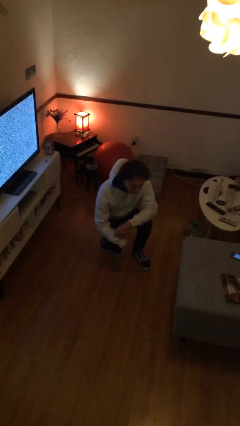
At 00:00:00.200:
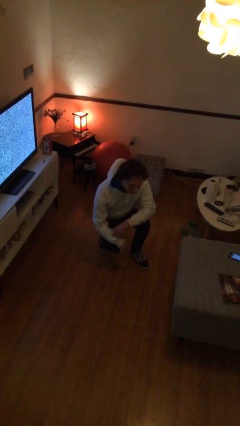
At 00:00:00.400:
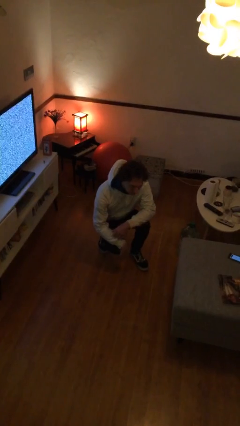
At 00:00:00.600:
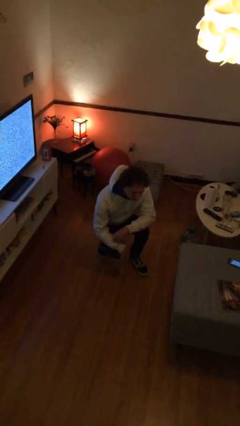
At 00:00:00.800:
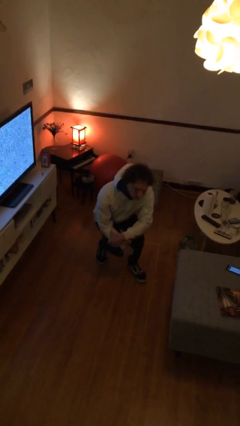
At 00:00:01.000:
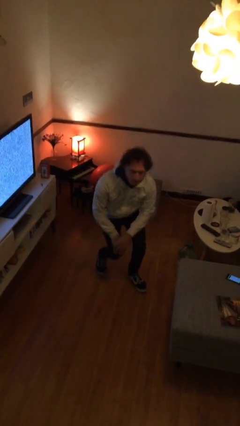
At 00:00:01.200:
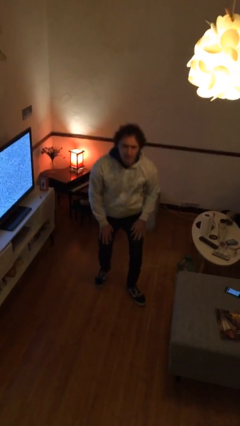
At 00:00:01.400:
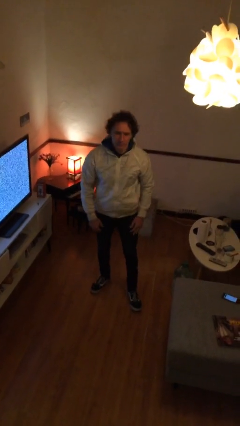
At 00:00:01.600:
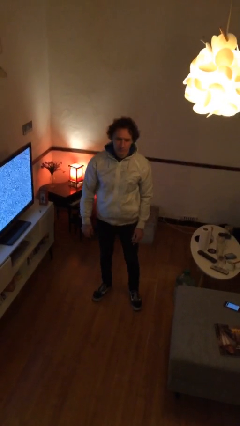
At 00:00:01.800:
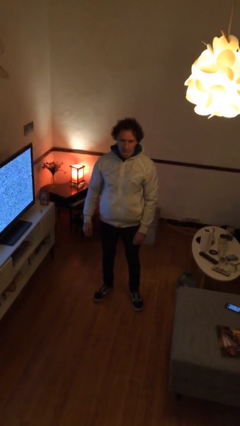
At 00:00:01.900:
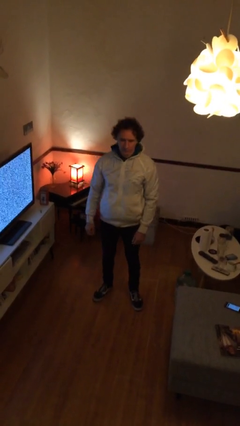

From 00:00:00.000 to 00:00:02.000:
person stands up

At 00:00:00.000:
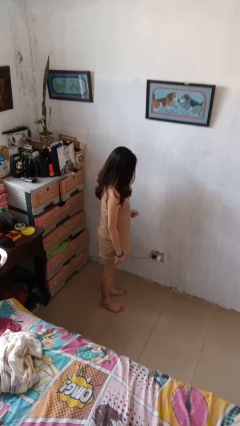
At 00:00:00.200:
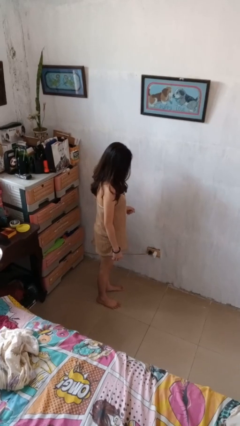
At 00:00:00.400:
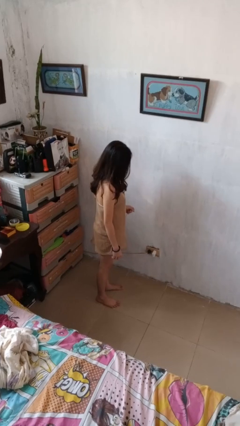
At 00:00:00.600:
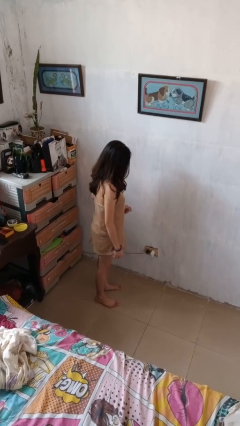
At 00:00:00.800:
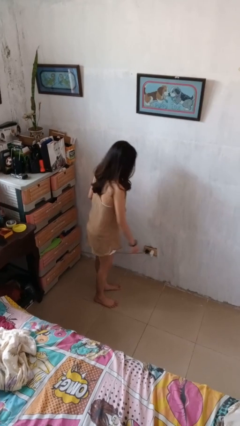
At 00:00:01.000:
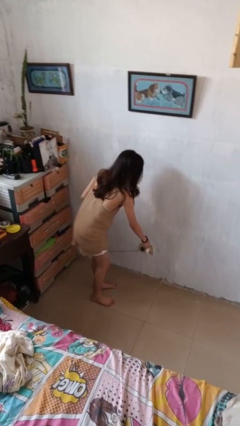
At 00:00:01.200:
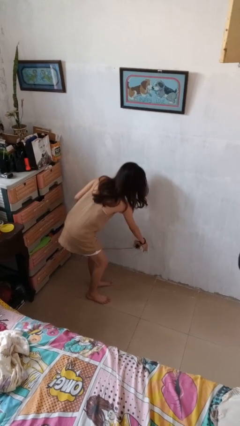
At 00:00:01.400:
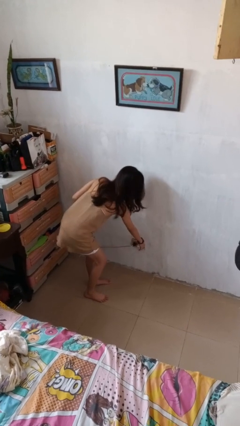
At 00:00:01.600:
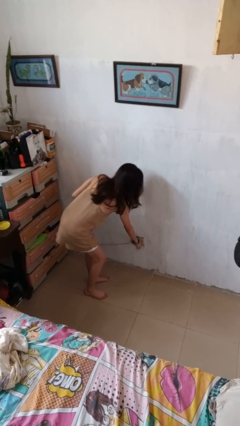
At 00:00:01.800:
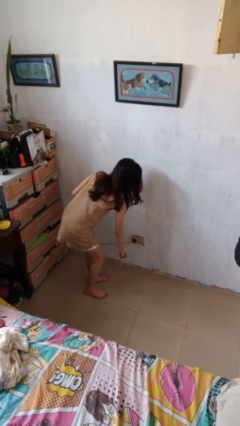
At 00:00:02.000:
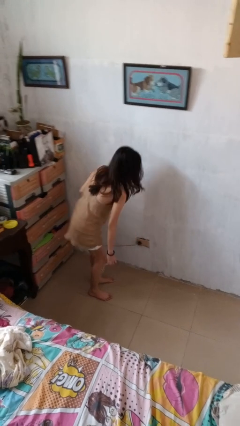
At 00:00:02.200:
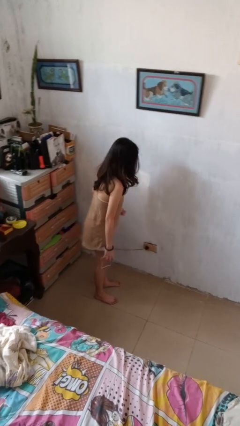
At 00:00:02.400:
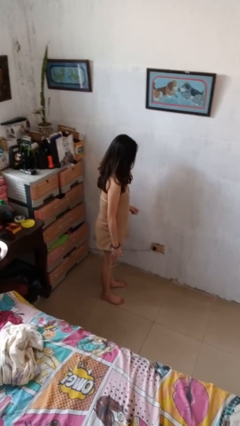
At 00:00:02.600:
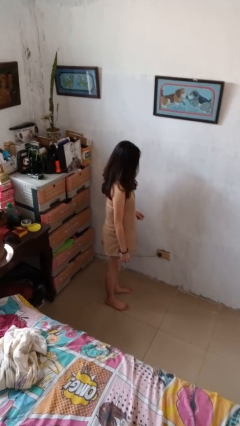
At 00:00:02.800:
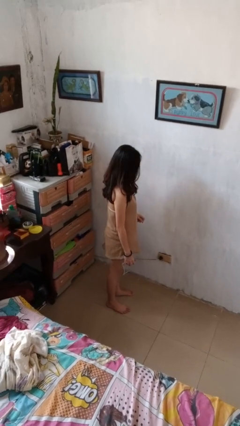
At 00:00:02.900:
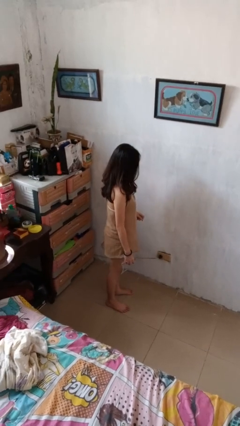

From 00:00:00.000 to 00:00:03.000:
person unplugs from electrical socket

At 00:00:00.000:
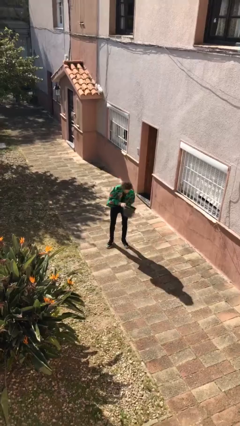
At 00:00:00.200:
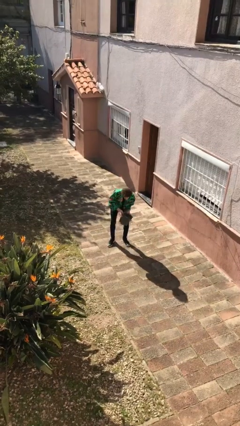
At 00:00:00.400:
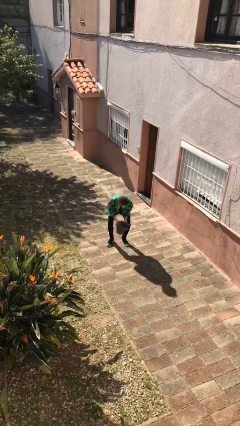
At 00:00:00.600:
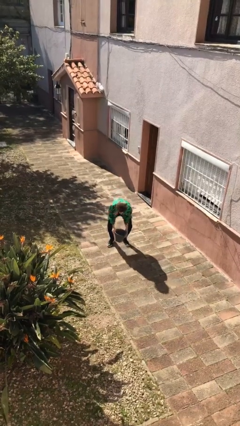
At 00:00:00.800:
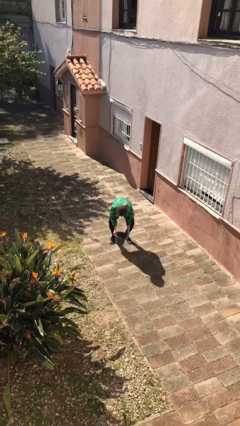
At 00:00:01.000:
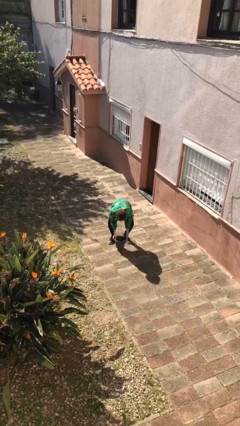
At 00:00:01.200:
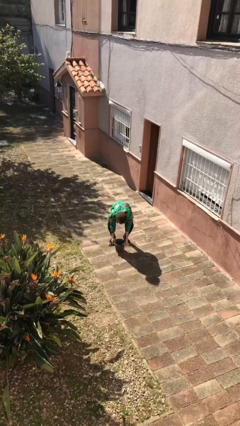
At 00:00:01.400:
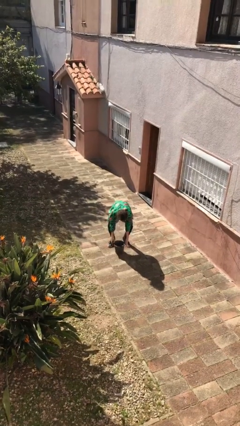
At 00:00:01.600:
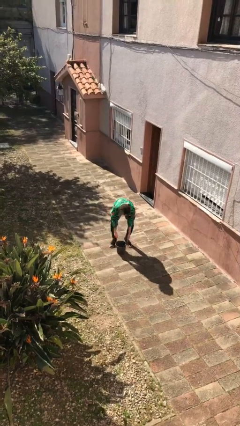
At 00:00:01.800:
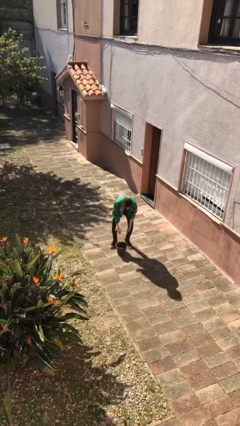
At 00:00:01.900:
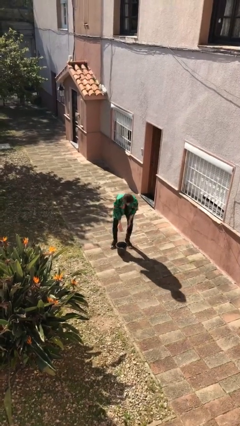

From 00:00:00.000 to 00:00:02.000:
person puts down object on floor

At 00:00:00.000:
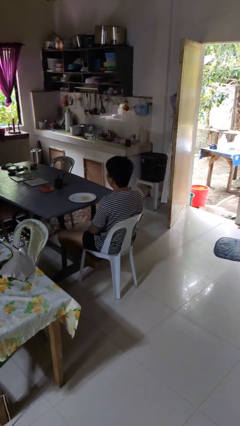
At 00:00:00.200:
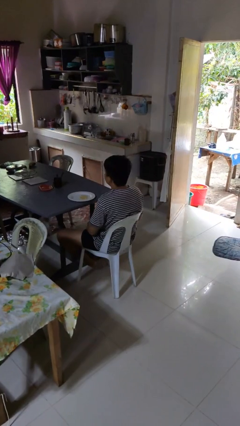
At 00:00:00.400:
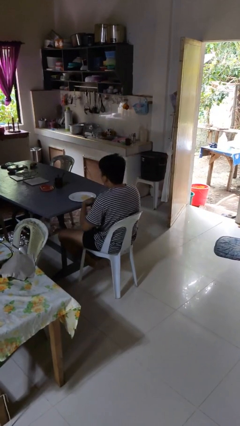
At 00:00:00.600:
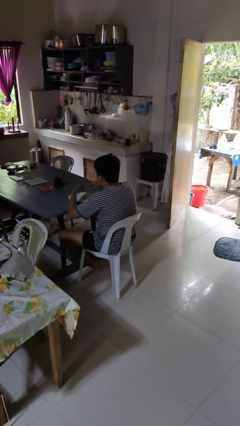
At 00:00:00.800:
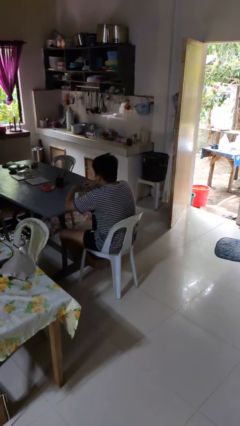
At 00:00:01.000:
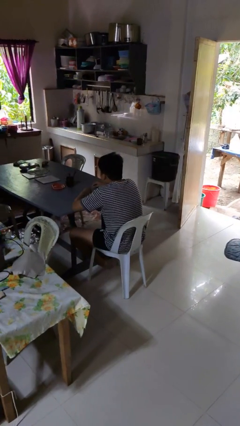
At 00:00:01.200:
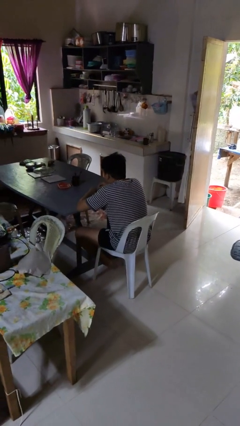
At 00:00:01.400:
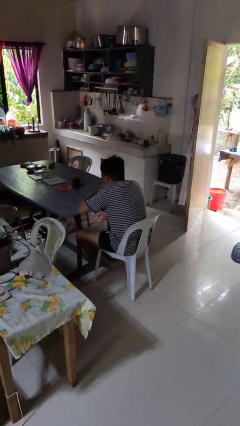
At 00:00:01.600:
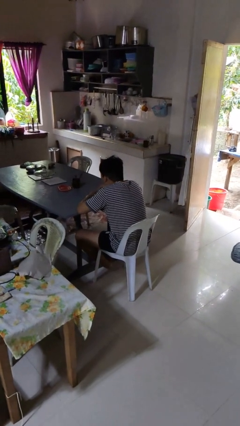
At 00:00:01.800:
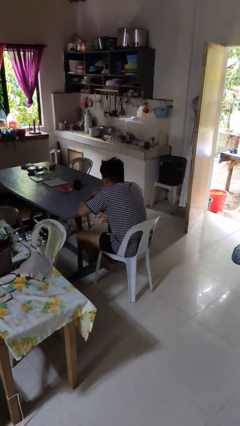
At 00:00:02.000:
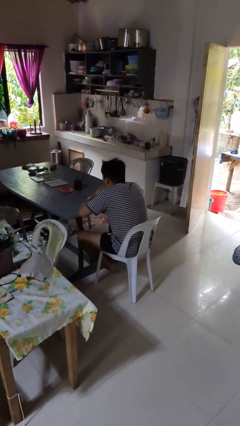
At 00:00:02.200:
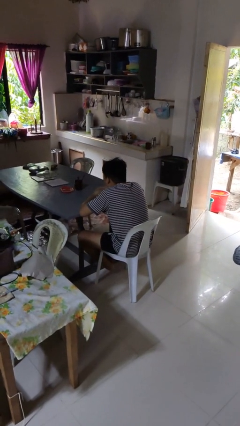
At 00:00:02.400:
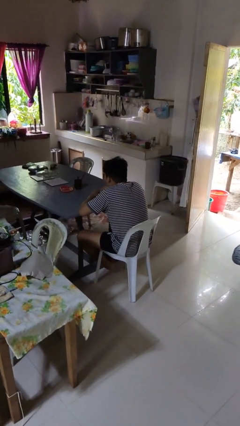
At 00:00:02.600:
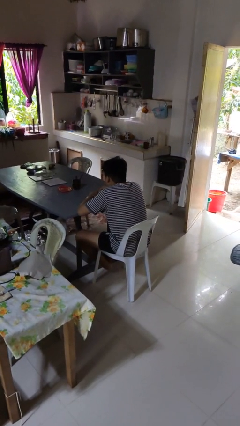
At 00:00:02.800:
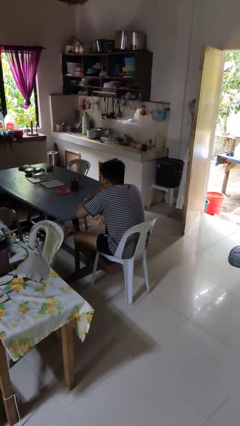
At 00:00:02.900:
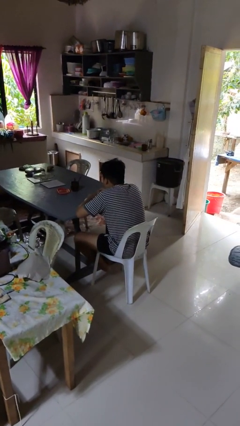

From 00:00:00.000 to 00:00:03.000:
person eats with hands

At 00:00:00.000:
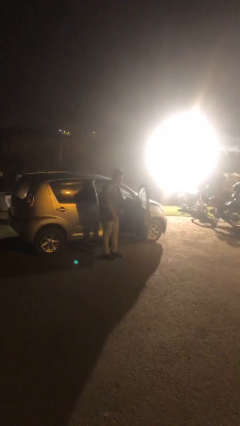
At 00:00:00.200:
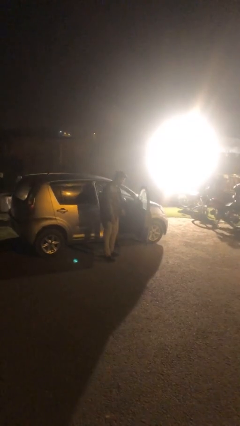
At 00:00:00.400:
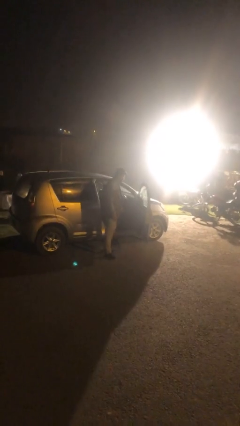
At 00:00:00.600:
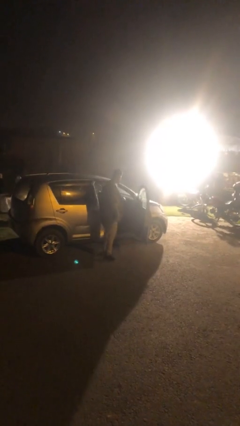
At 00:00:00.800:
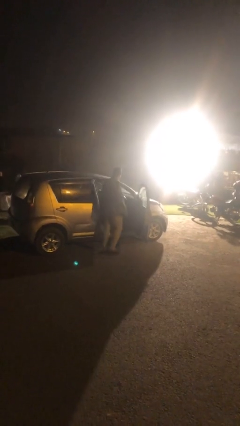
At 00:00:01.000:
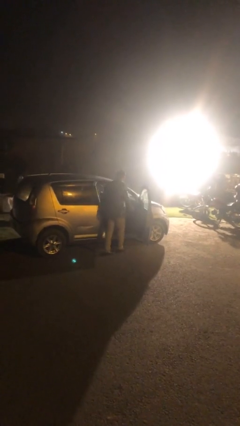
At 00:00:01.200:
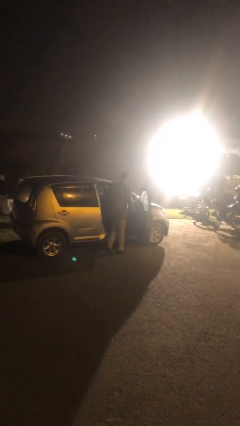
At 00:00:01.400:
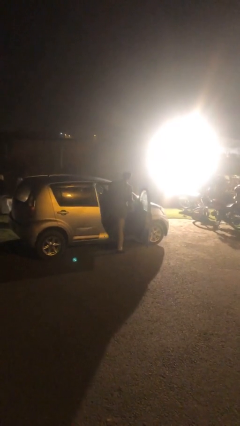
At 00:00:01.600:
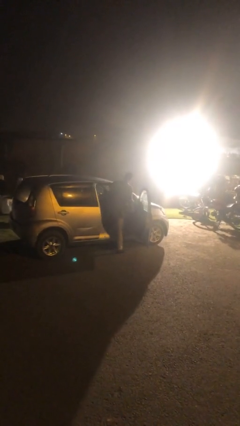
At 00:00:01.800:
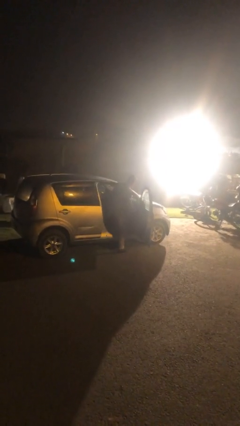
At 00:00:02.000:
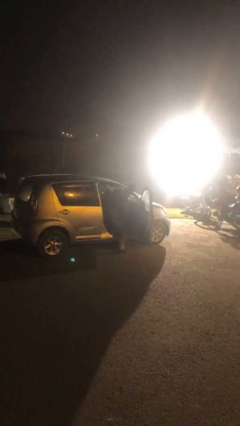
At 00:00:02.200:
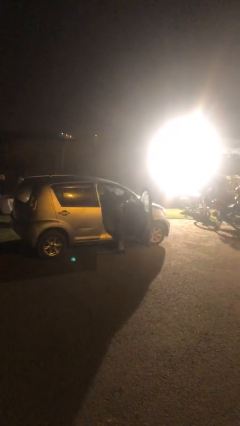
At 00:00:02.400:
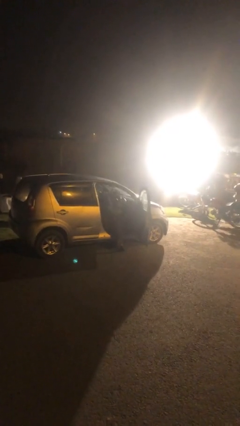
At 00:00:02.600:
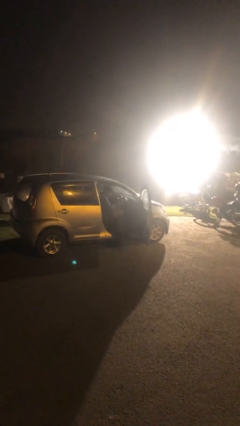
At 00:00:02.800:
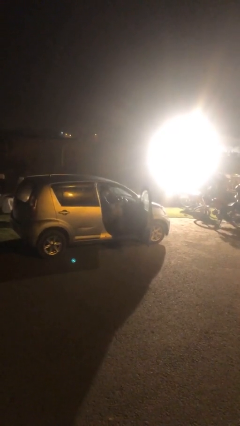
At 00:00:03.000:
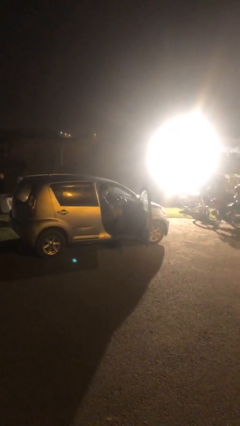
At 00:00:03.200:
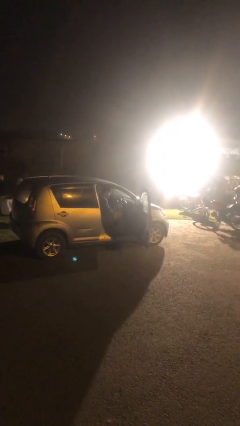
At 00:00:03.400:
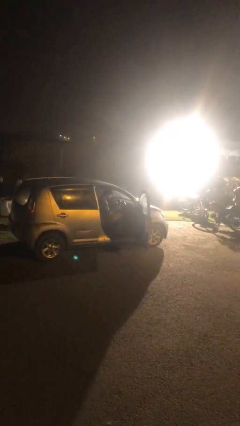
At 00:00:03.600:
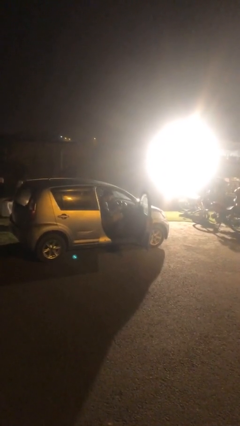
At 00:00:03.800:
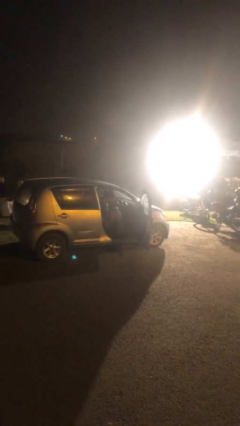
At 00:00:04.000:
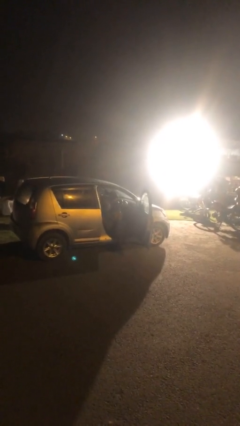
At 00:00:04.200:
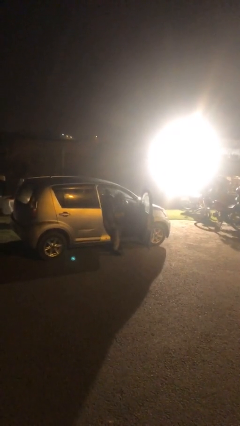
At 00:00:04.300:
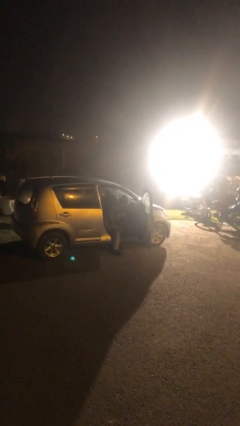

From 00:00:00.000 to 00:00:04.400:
person enters car

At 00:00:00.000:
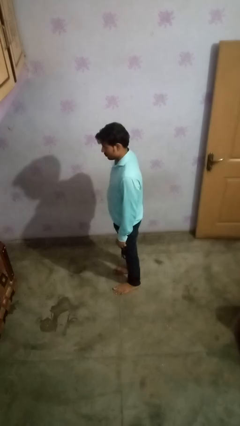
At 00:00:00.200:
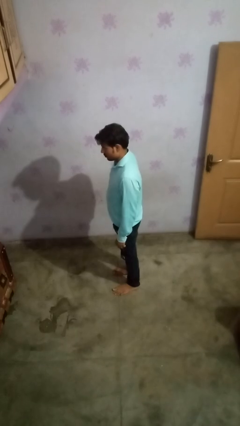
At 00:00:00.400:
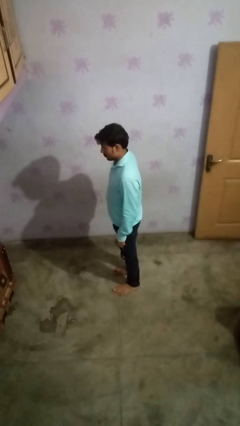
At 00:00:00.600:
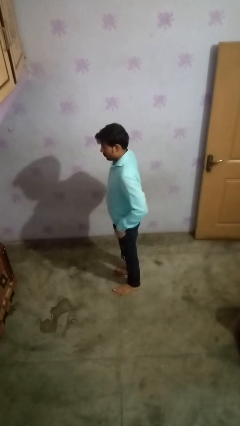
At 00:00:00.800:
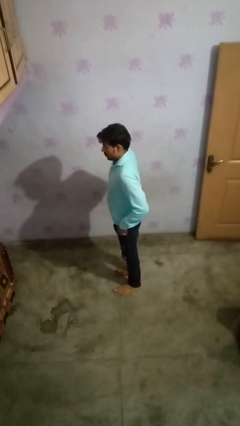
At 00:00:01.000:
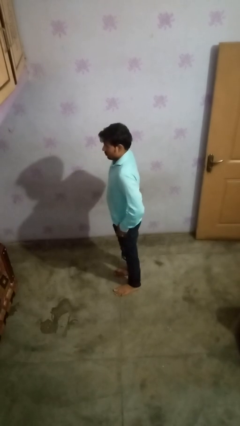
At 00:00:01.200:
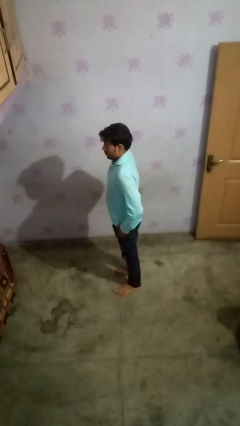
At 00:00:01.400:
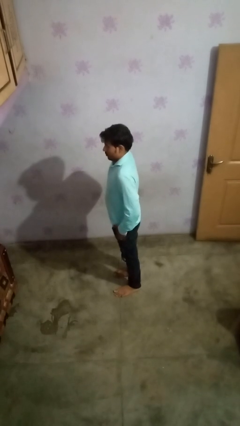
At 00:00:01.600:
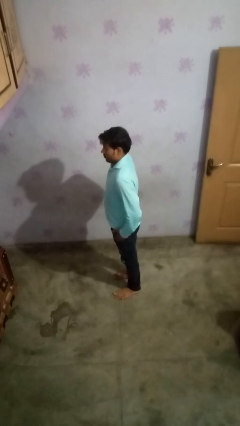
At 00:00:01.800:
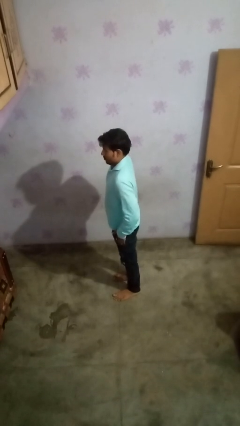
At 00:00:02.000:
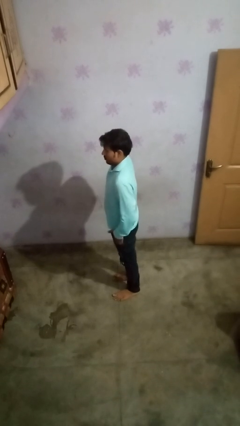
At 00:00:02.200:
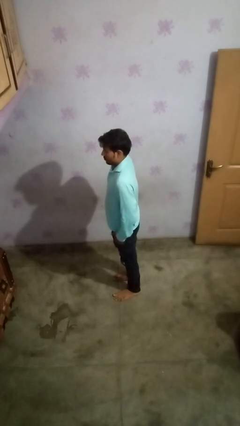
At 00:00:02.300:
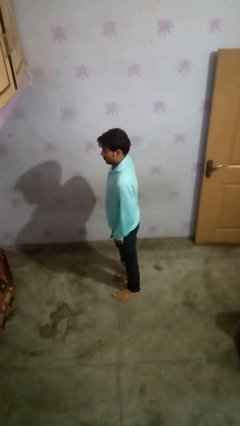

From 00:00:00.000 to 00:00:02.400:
person puts hands in back pockets
